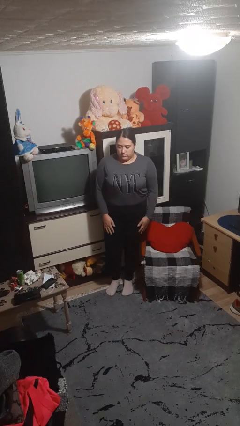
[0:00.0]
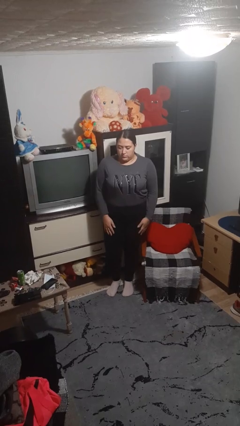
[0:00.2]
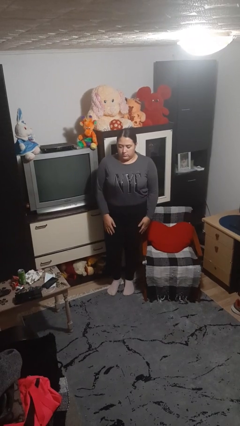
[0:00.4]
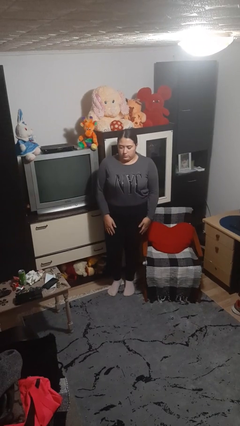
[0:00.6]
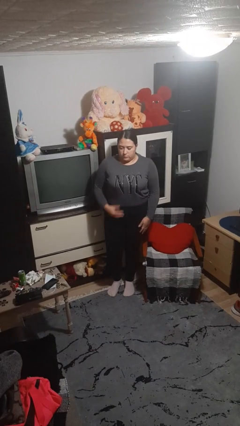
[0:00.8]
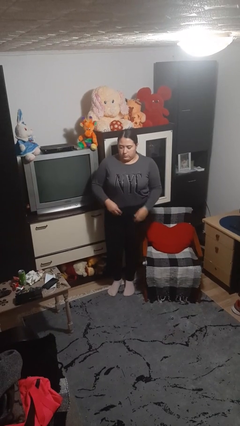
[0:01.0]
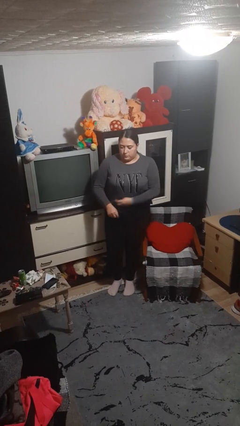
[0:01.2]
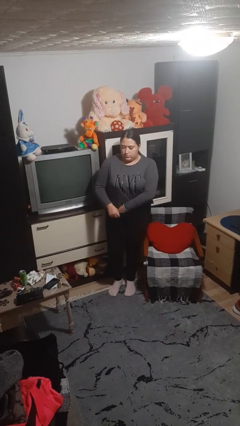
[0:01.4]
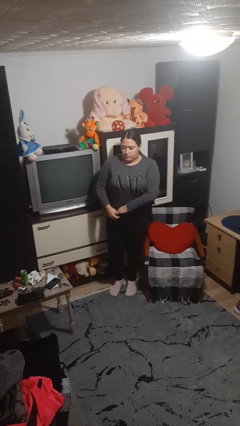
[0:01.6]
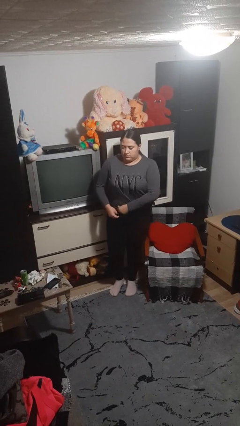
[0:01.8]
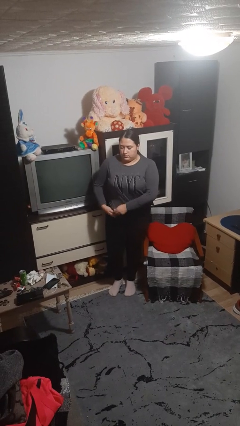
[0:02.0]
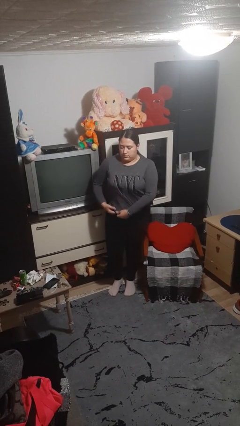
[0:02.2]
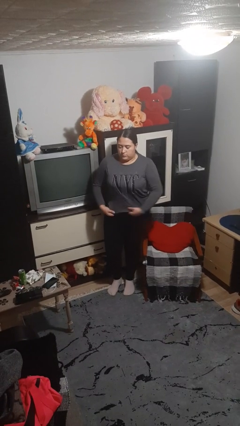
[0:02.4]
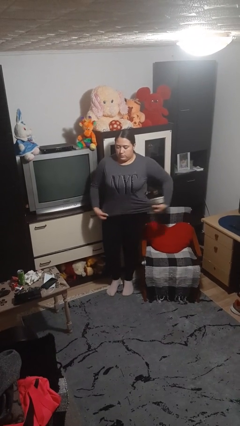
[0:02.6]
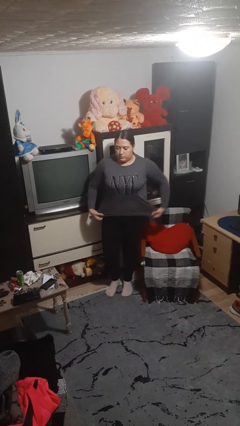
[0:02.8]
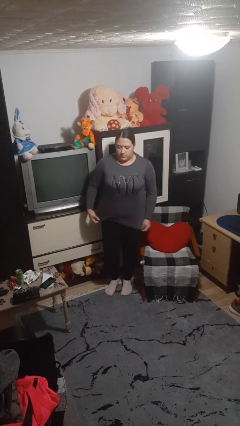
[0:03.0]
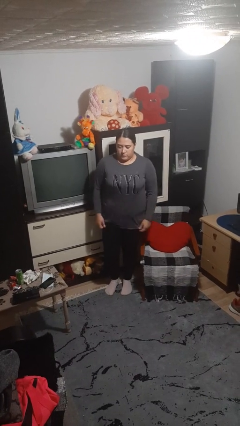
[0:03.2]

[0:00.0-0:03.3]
person untucks shirt

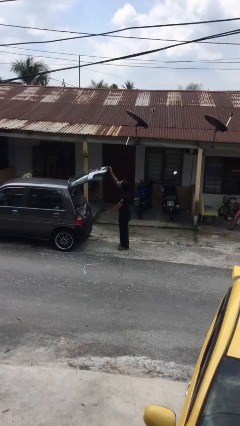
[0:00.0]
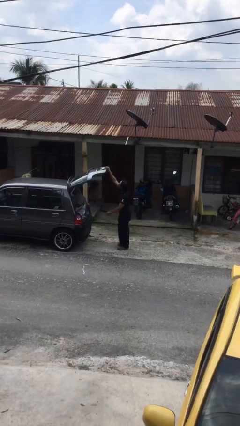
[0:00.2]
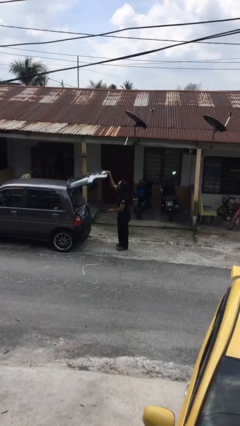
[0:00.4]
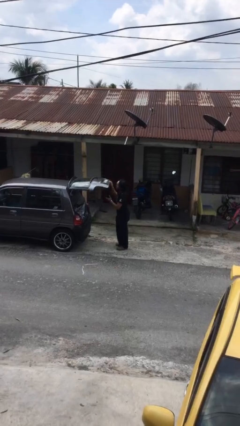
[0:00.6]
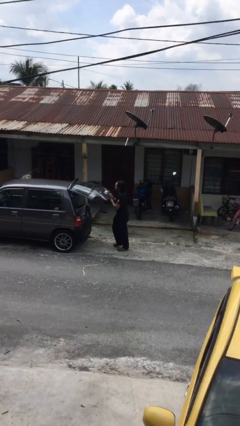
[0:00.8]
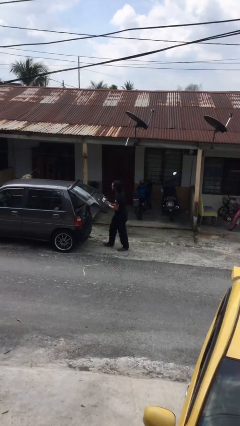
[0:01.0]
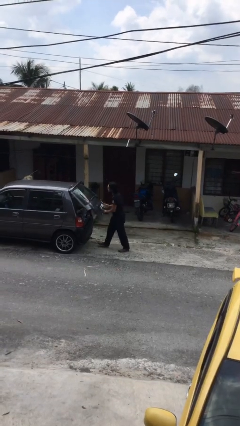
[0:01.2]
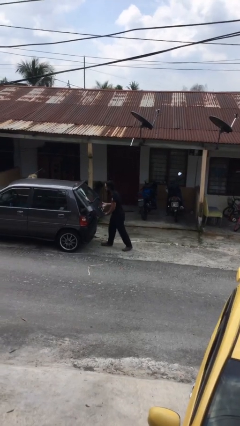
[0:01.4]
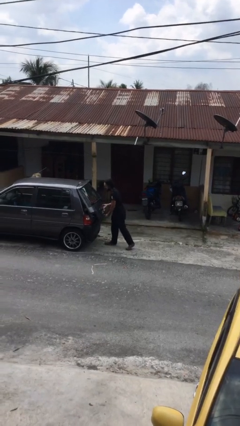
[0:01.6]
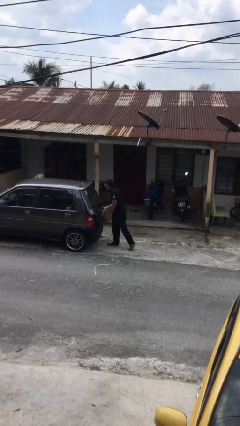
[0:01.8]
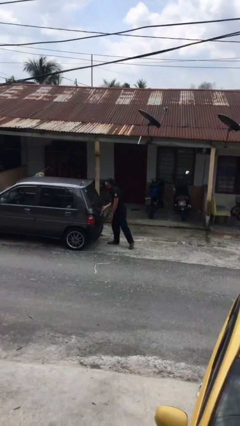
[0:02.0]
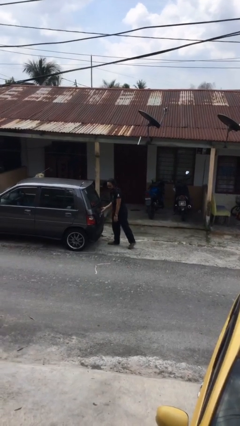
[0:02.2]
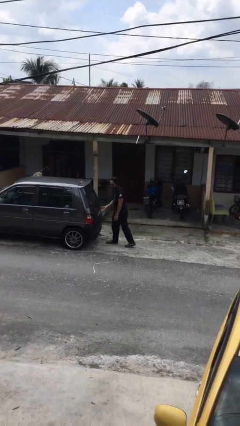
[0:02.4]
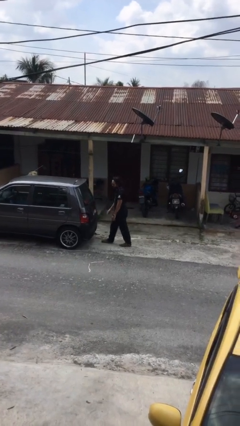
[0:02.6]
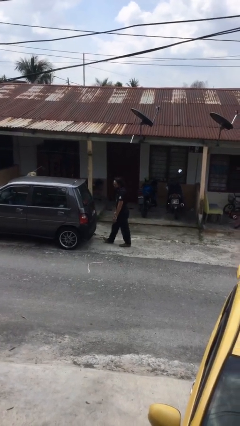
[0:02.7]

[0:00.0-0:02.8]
person closes car trunk

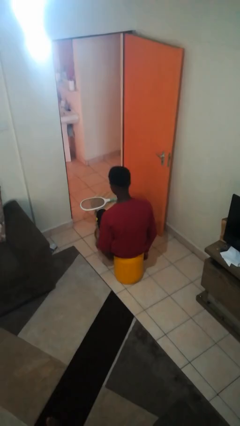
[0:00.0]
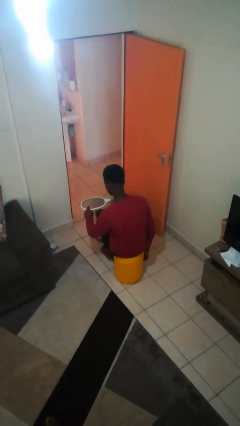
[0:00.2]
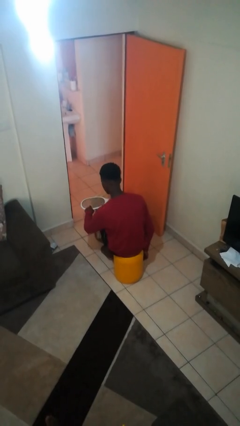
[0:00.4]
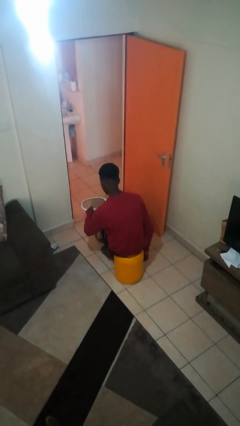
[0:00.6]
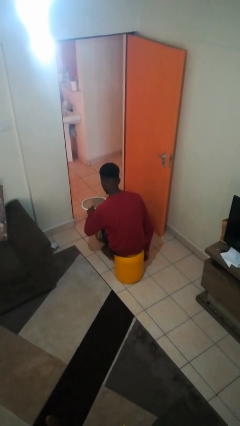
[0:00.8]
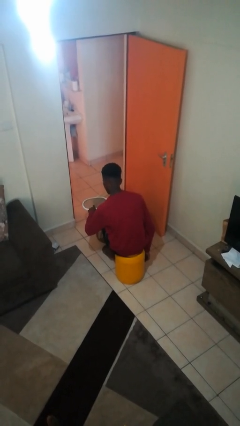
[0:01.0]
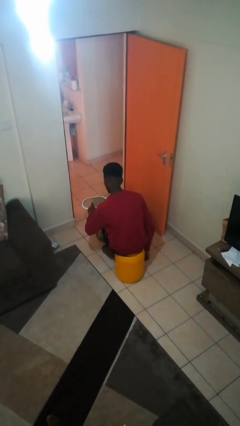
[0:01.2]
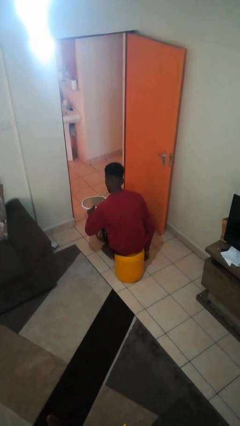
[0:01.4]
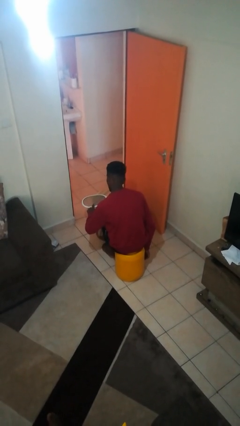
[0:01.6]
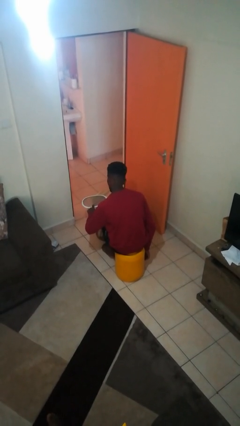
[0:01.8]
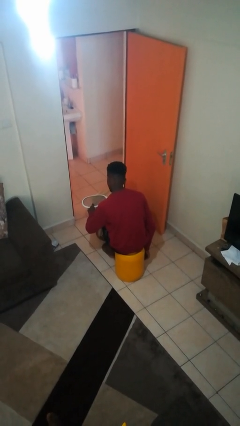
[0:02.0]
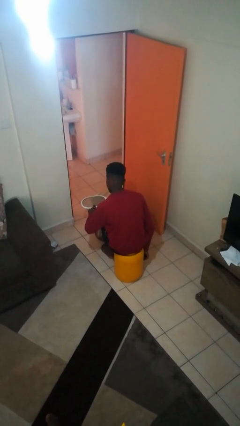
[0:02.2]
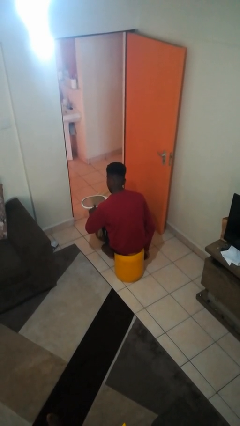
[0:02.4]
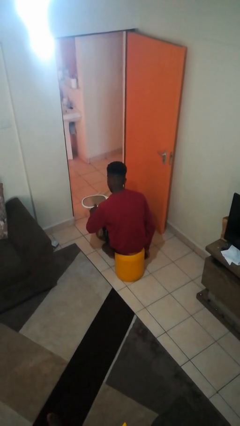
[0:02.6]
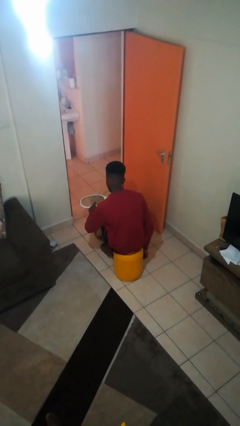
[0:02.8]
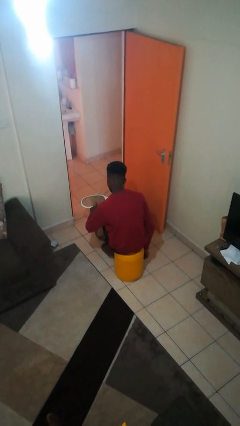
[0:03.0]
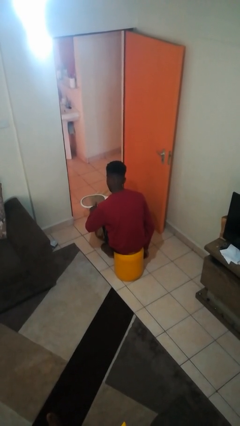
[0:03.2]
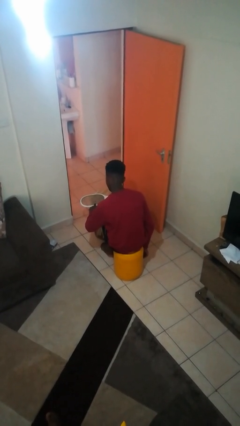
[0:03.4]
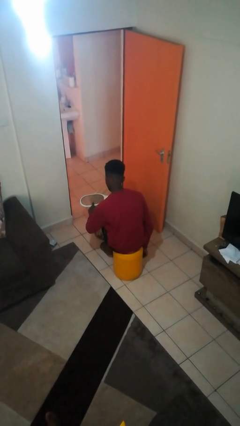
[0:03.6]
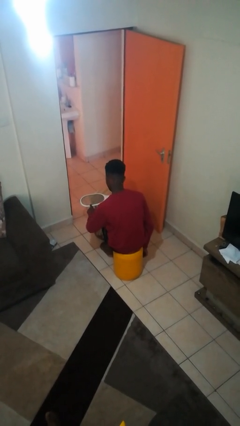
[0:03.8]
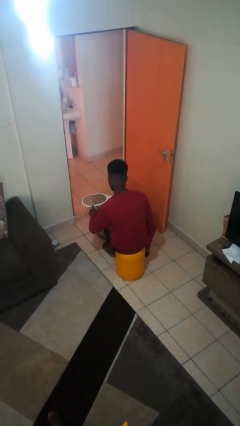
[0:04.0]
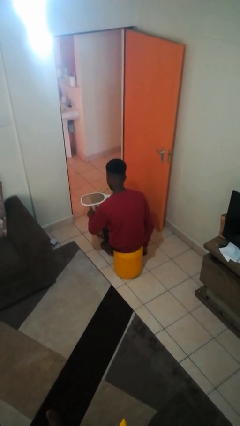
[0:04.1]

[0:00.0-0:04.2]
person taps object with finger

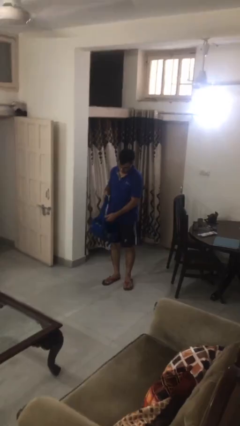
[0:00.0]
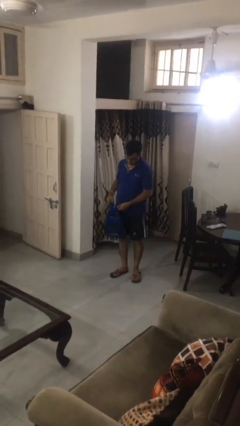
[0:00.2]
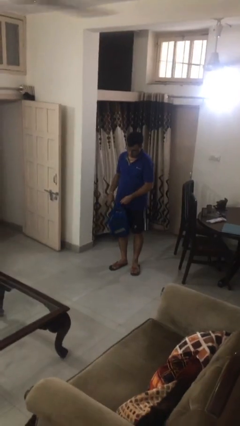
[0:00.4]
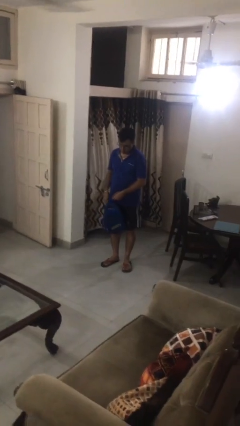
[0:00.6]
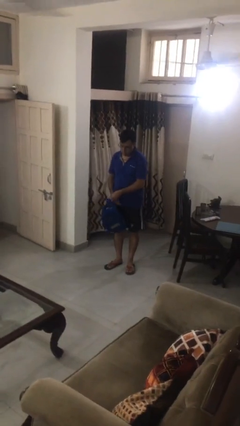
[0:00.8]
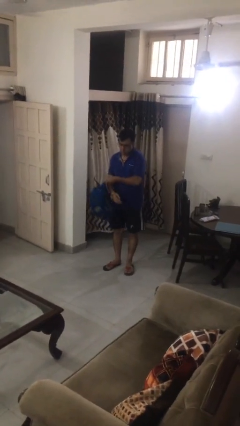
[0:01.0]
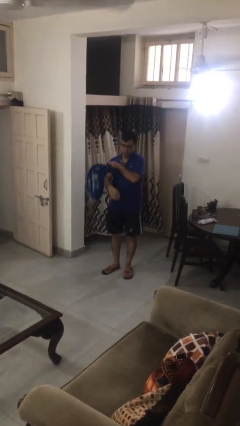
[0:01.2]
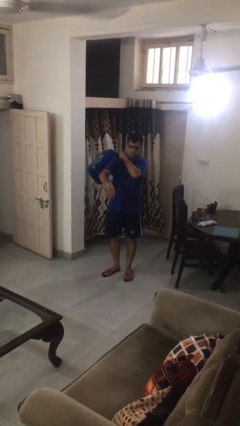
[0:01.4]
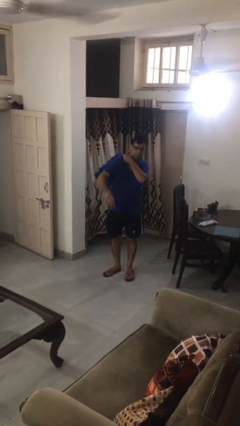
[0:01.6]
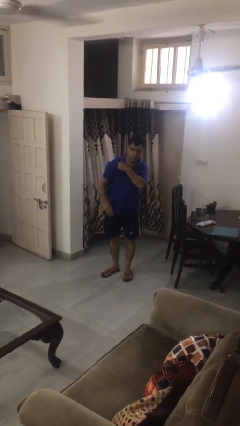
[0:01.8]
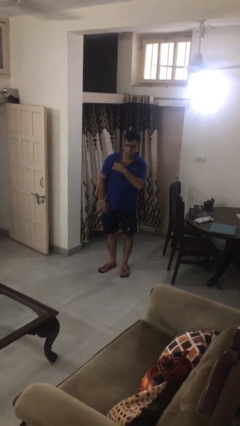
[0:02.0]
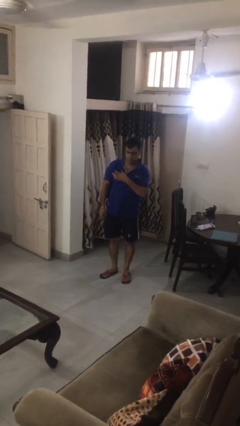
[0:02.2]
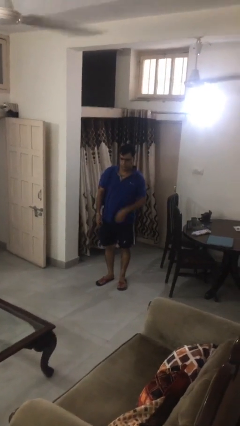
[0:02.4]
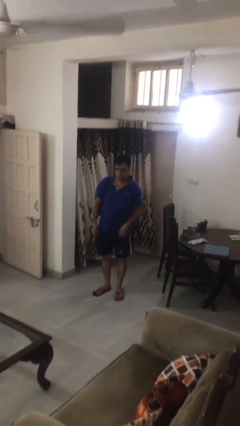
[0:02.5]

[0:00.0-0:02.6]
person puts on backpack

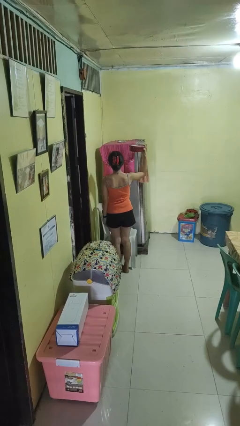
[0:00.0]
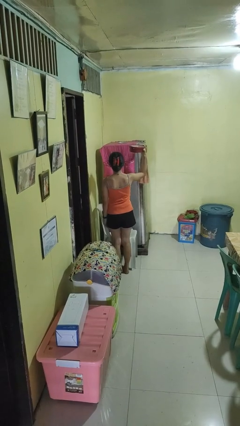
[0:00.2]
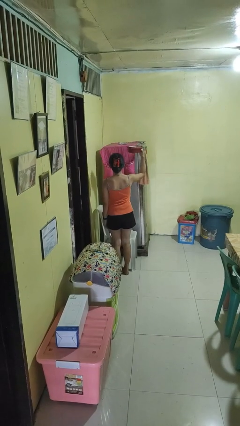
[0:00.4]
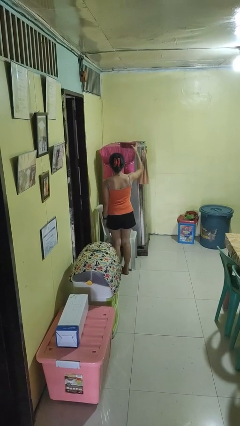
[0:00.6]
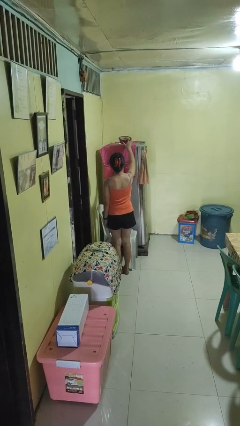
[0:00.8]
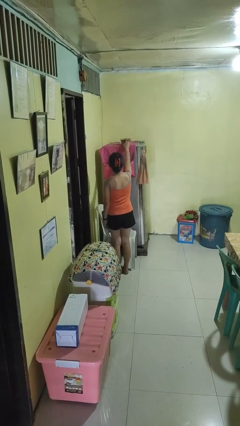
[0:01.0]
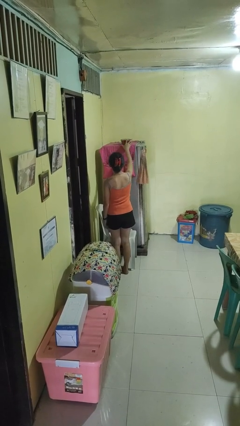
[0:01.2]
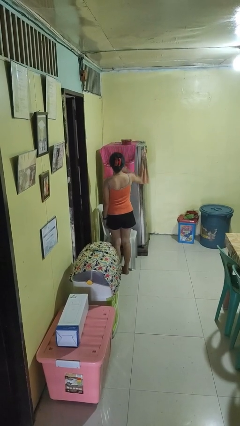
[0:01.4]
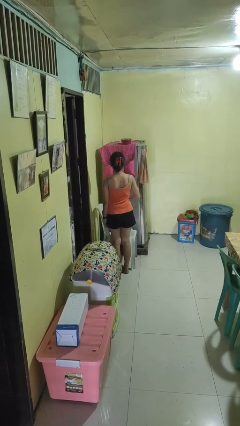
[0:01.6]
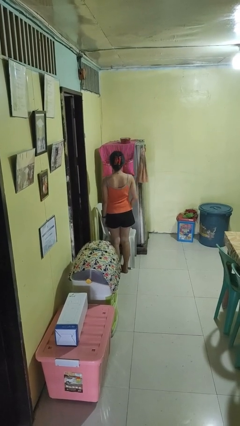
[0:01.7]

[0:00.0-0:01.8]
person puts down object on shelf

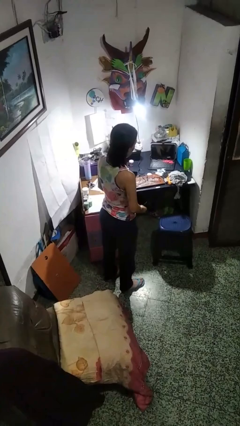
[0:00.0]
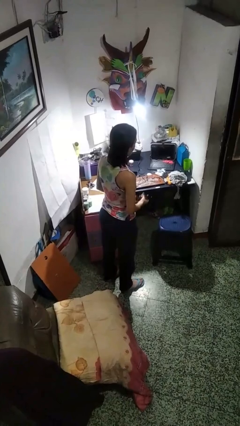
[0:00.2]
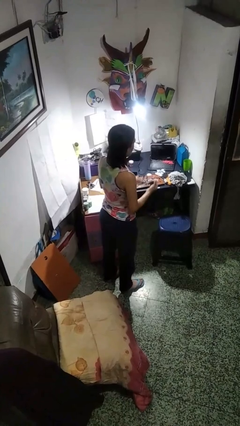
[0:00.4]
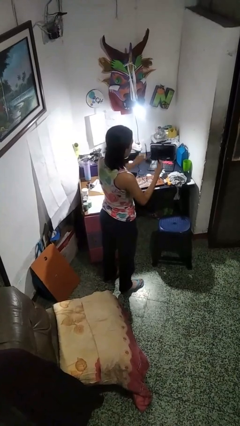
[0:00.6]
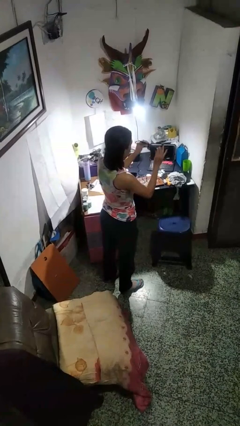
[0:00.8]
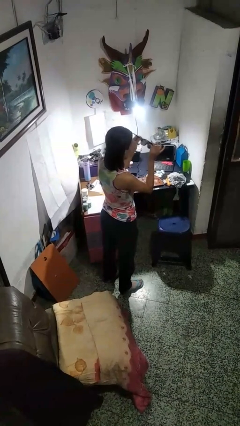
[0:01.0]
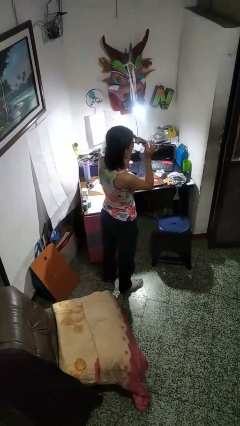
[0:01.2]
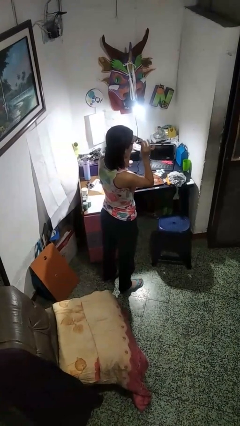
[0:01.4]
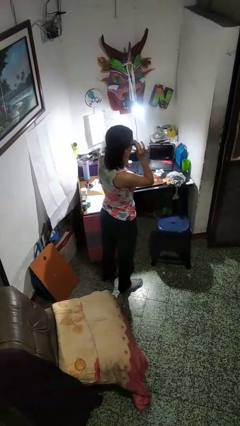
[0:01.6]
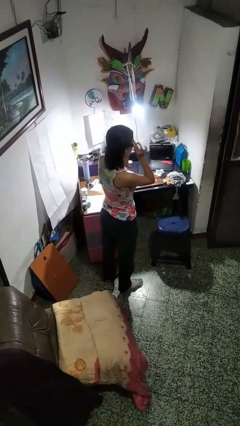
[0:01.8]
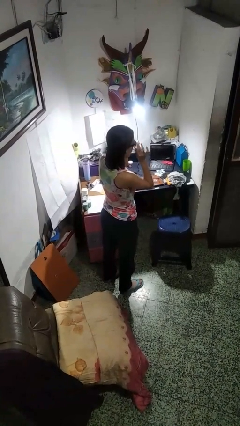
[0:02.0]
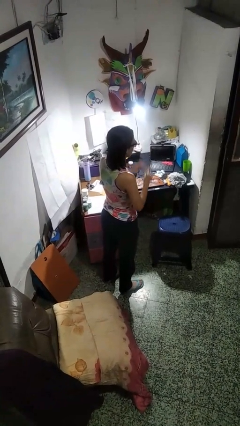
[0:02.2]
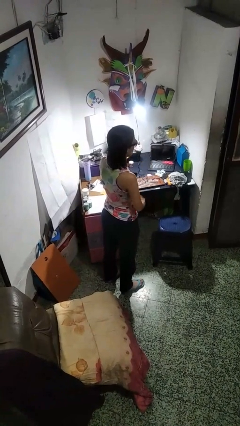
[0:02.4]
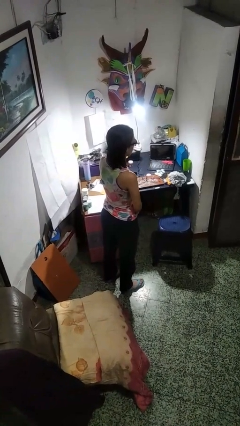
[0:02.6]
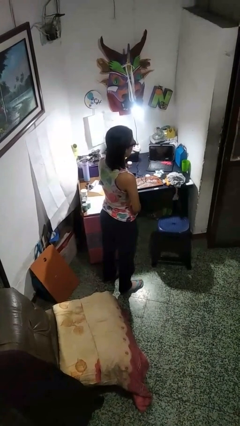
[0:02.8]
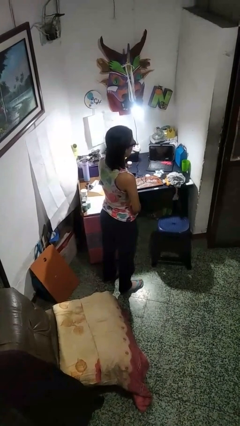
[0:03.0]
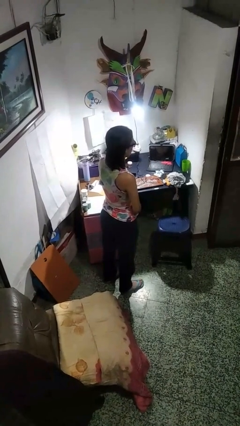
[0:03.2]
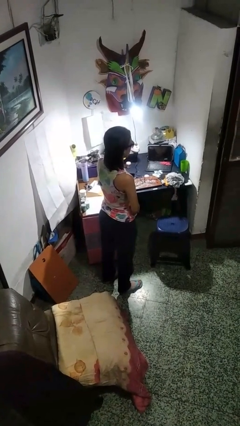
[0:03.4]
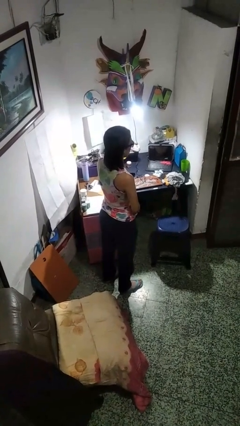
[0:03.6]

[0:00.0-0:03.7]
person puts on sunglasses
